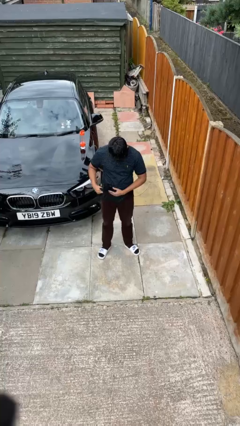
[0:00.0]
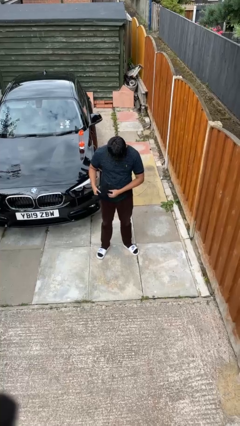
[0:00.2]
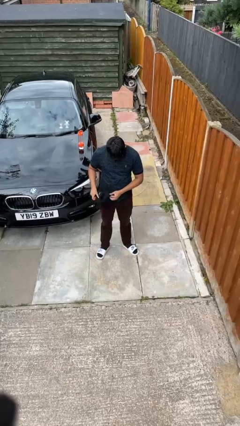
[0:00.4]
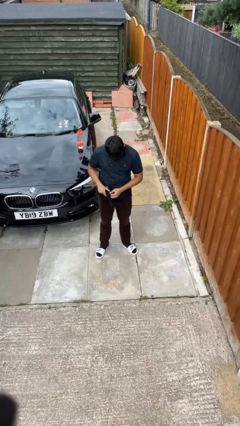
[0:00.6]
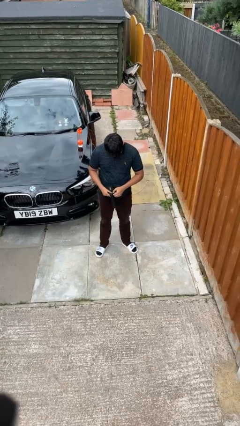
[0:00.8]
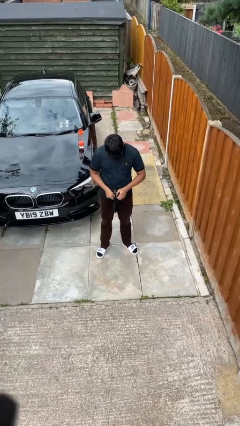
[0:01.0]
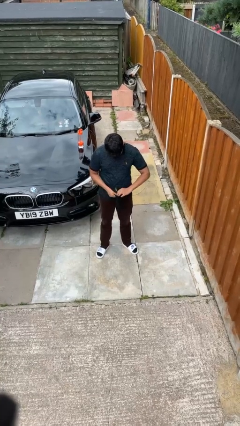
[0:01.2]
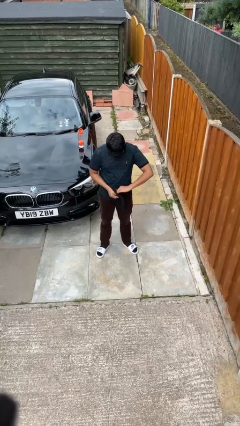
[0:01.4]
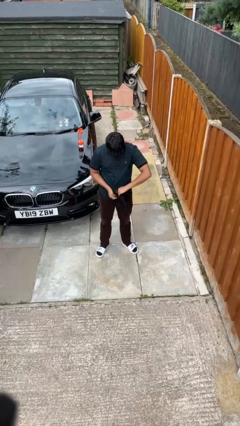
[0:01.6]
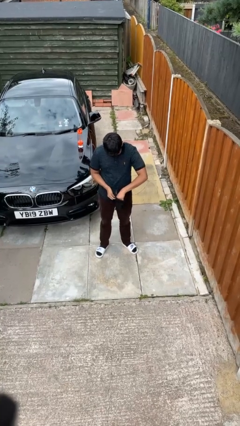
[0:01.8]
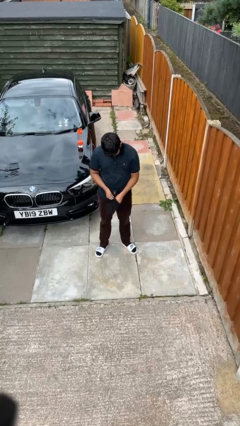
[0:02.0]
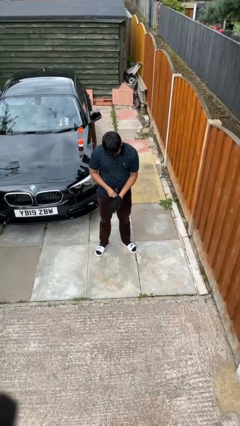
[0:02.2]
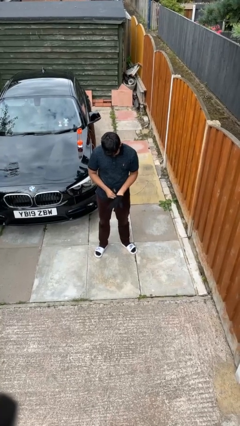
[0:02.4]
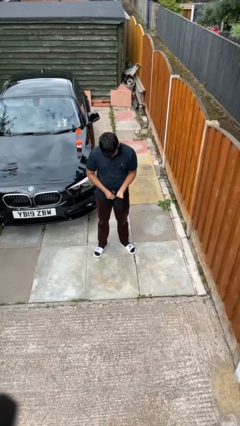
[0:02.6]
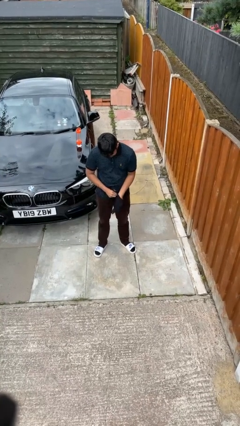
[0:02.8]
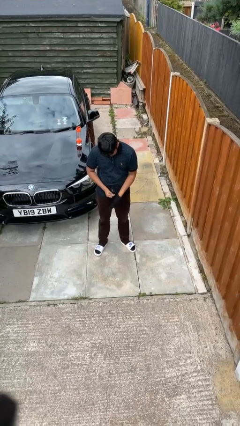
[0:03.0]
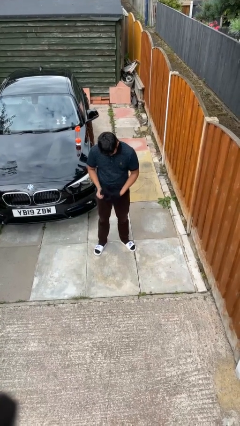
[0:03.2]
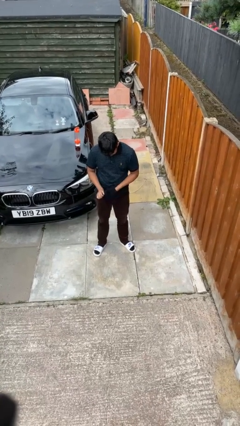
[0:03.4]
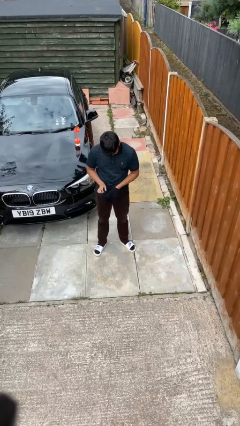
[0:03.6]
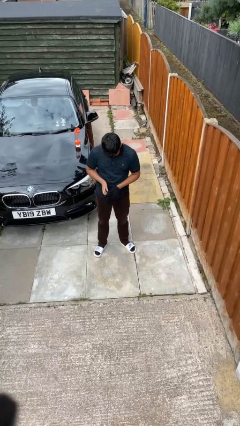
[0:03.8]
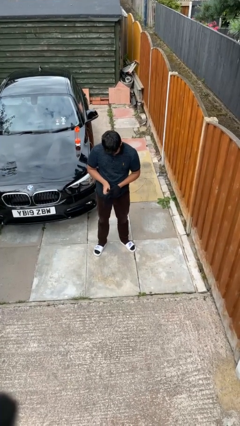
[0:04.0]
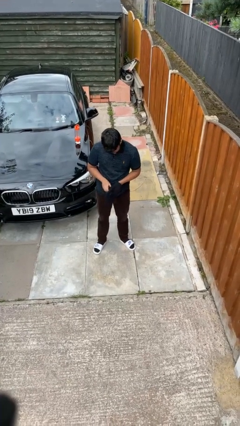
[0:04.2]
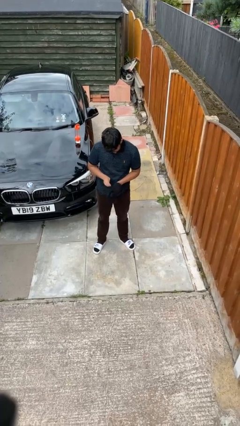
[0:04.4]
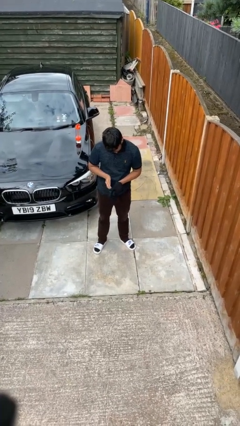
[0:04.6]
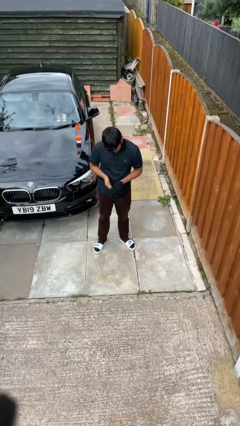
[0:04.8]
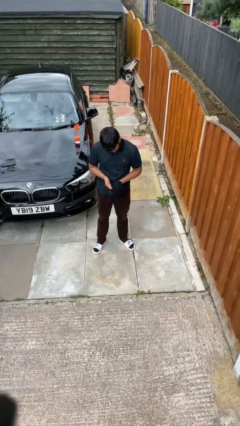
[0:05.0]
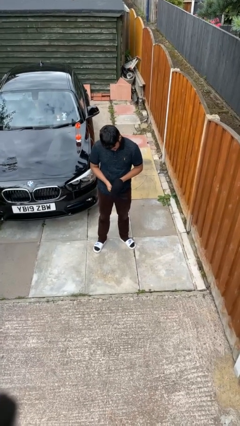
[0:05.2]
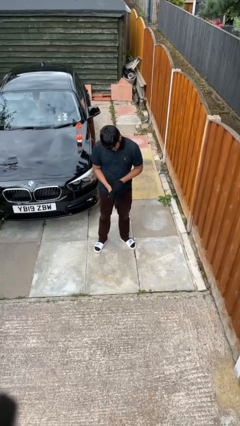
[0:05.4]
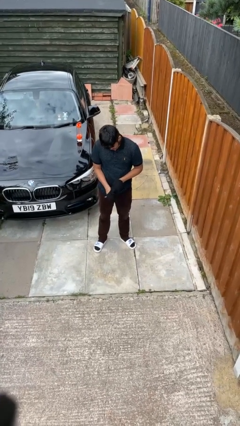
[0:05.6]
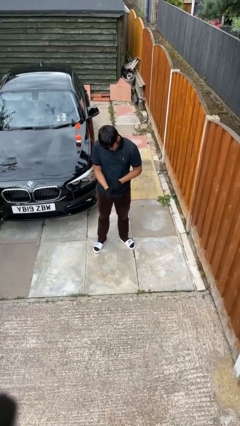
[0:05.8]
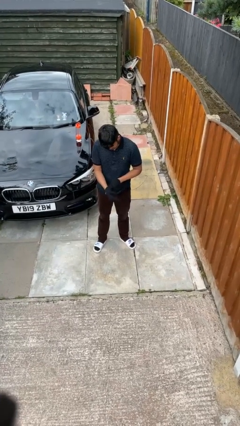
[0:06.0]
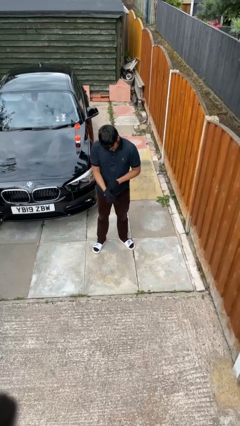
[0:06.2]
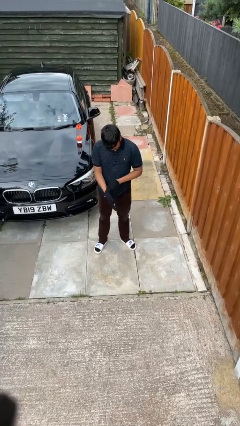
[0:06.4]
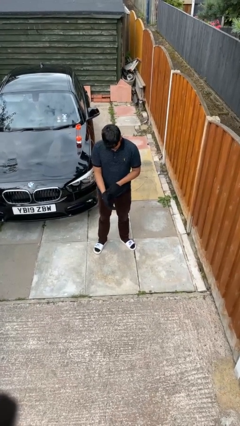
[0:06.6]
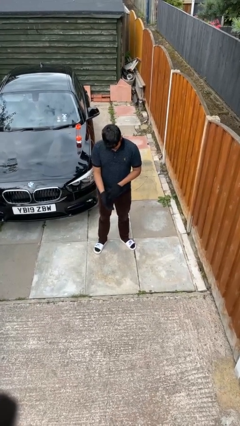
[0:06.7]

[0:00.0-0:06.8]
person puts on gloves

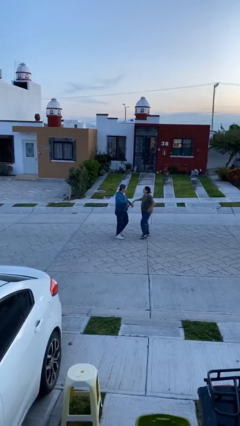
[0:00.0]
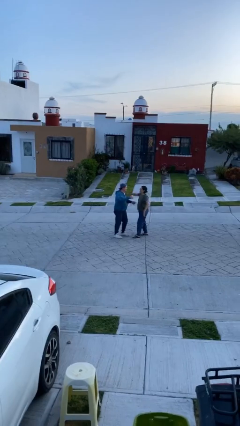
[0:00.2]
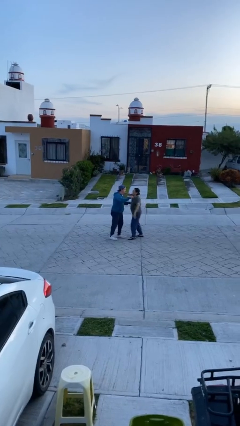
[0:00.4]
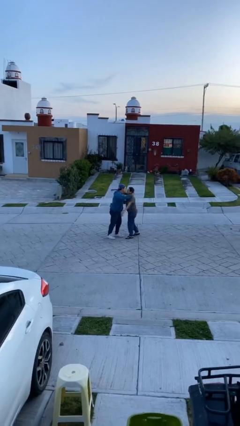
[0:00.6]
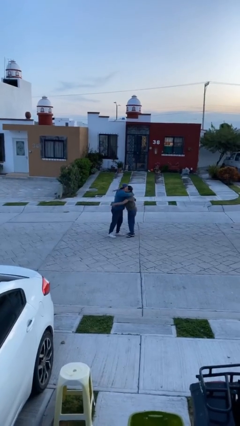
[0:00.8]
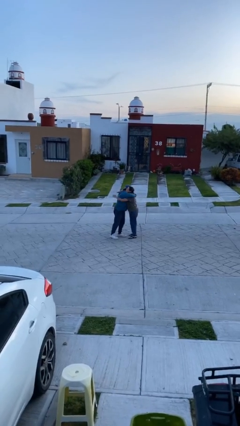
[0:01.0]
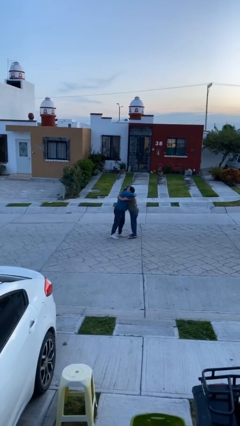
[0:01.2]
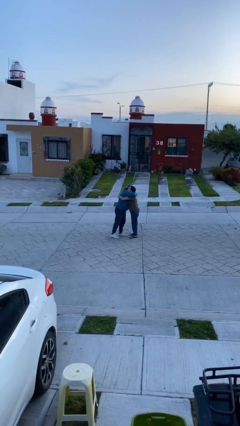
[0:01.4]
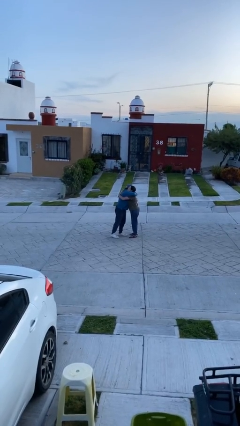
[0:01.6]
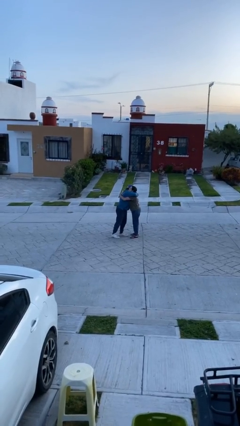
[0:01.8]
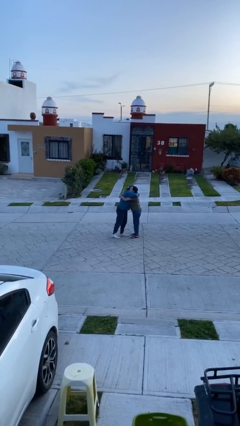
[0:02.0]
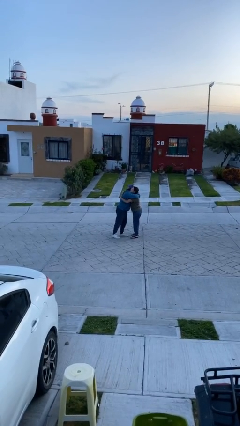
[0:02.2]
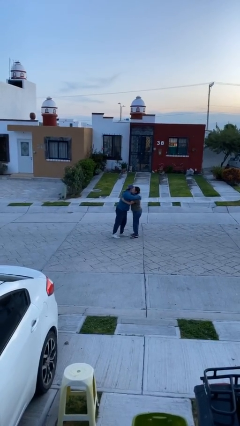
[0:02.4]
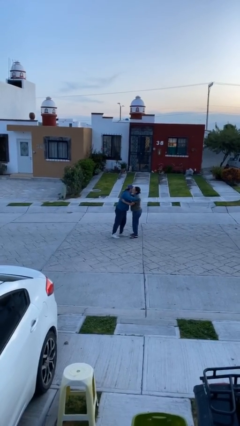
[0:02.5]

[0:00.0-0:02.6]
person embraces person

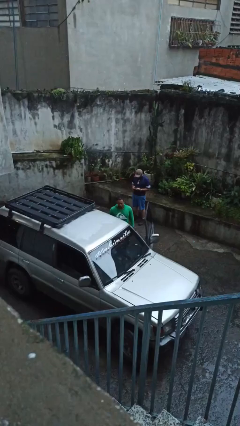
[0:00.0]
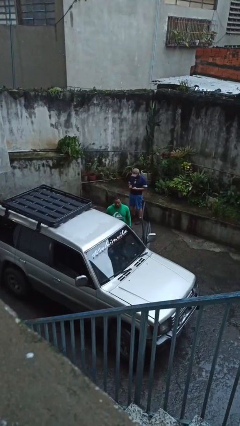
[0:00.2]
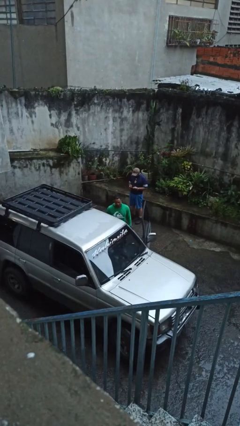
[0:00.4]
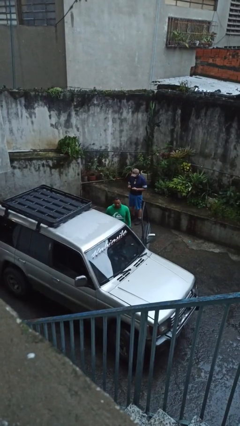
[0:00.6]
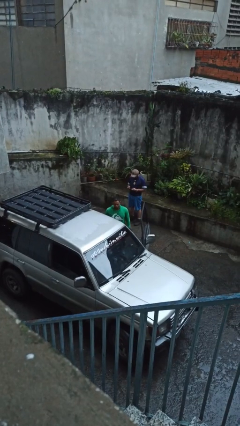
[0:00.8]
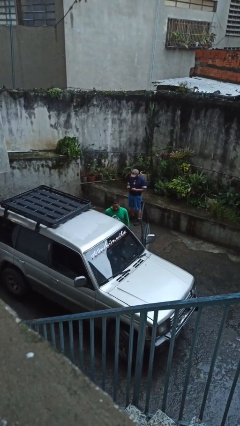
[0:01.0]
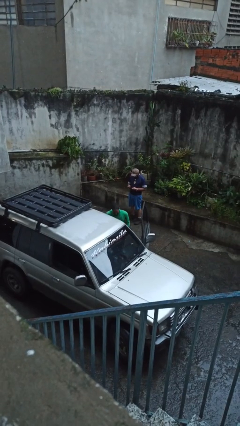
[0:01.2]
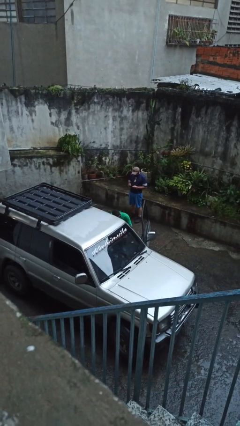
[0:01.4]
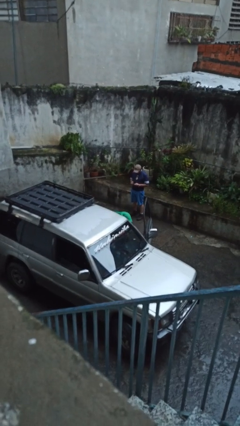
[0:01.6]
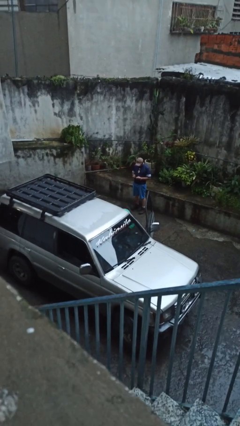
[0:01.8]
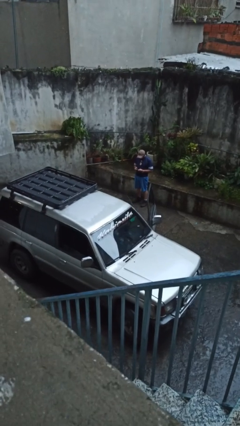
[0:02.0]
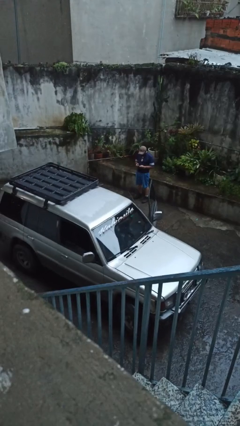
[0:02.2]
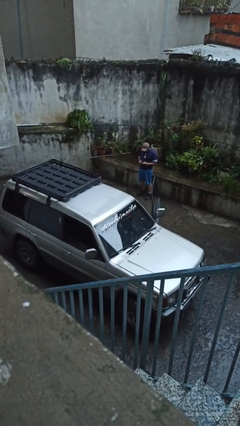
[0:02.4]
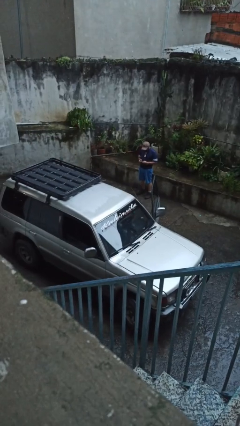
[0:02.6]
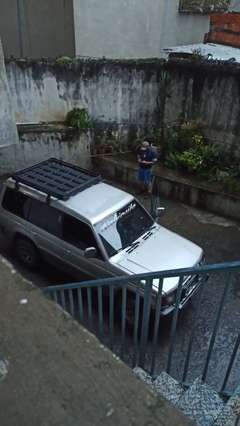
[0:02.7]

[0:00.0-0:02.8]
person enters car

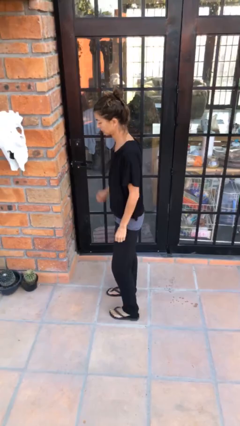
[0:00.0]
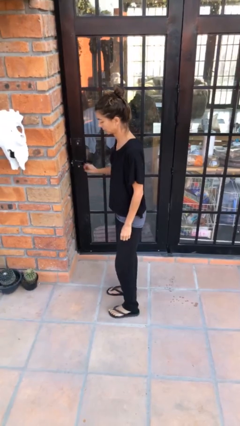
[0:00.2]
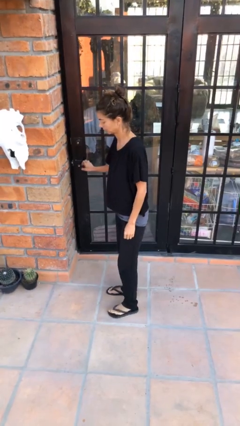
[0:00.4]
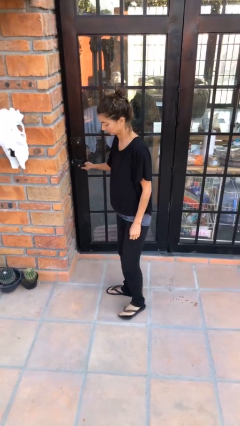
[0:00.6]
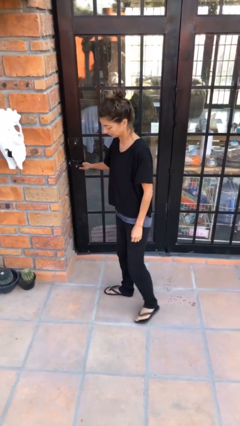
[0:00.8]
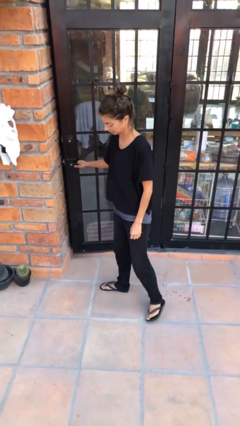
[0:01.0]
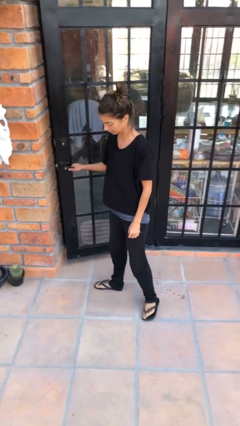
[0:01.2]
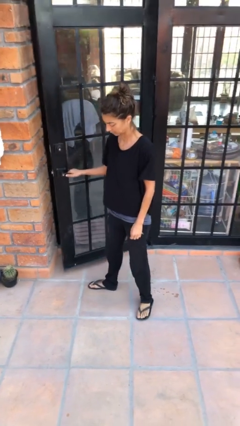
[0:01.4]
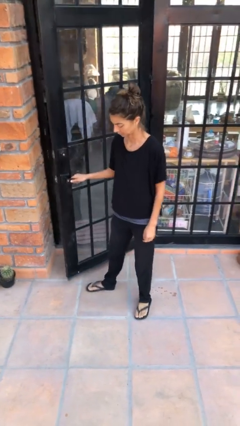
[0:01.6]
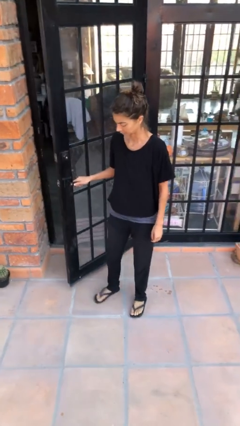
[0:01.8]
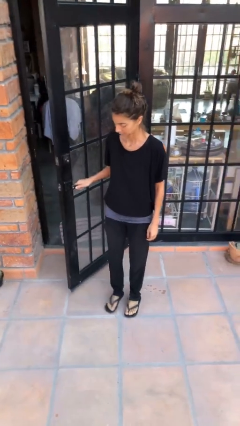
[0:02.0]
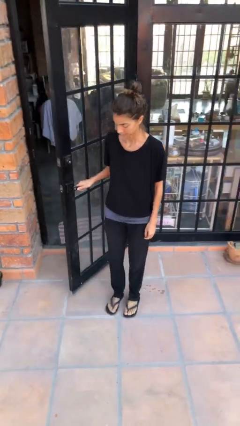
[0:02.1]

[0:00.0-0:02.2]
person opens facility door

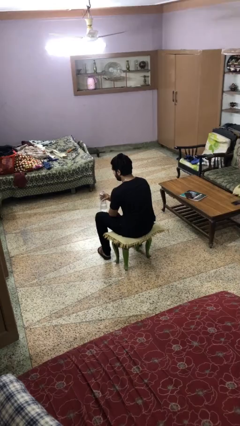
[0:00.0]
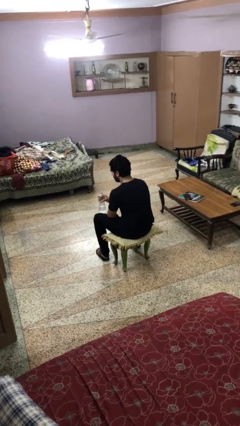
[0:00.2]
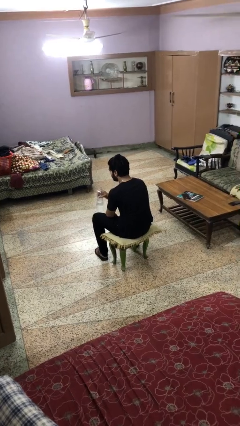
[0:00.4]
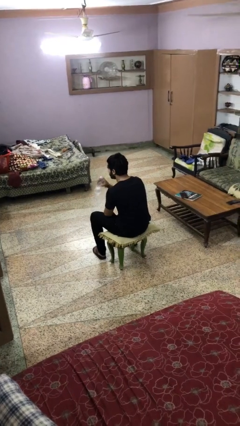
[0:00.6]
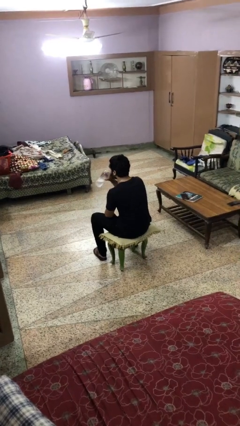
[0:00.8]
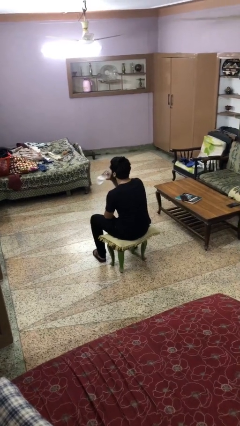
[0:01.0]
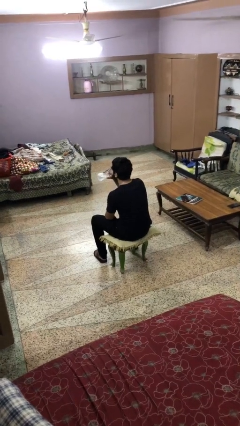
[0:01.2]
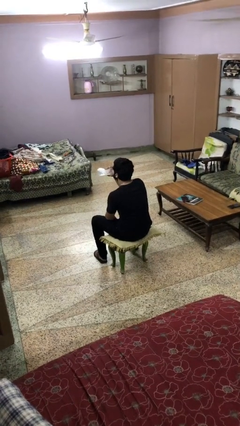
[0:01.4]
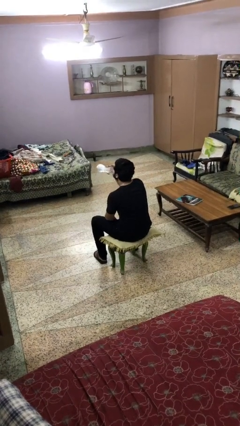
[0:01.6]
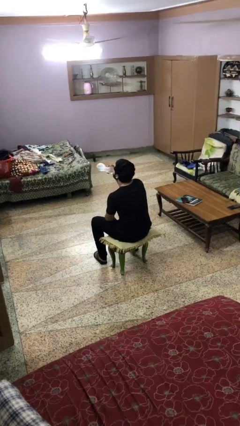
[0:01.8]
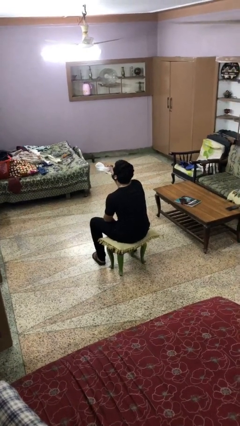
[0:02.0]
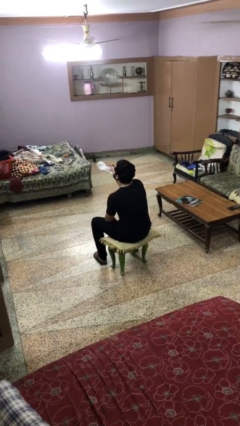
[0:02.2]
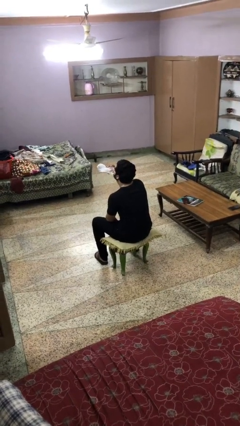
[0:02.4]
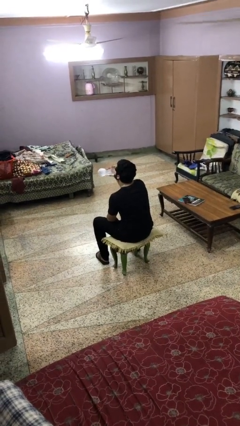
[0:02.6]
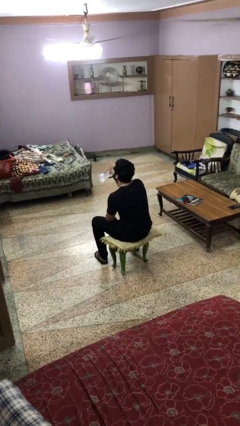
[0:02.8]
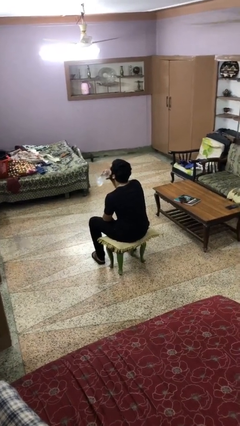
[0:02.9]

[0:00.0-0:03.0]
person drinks from bottle
